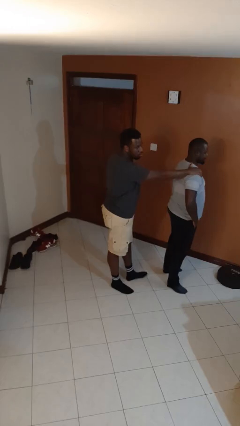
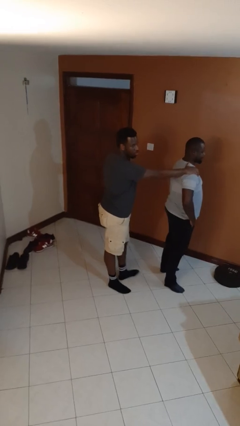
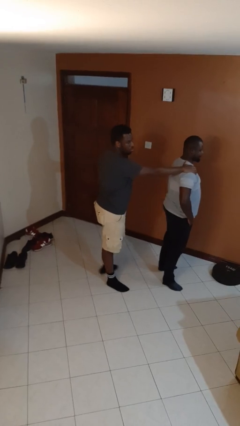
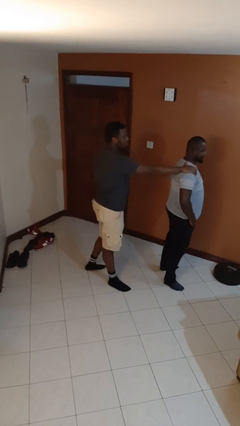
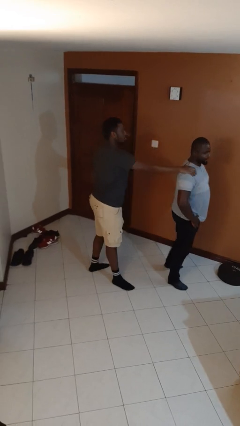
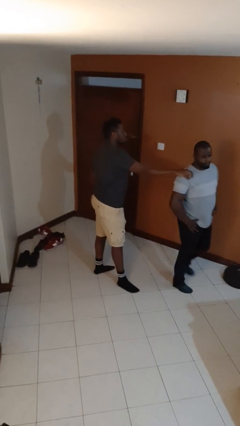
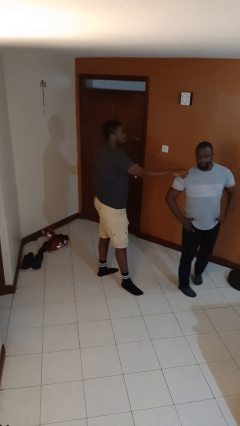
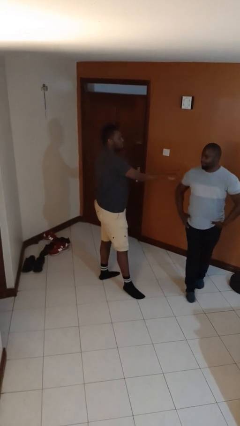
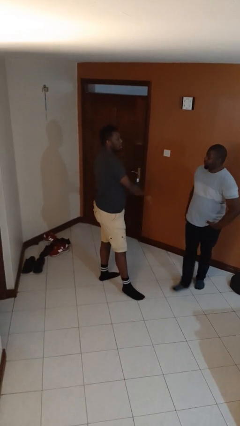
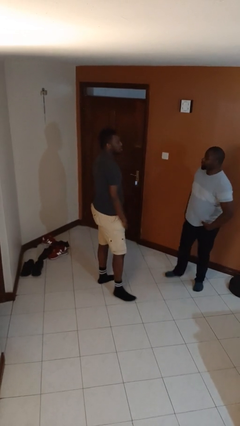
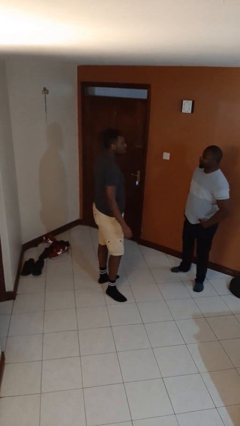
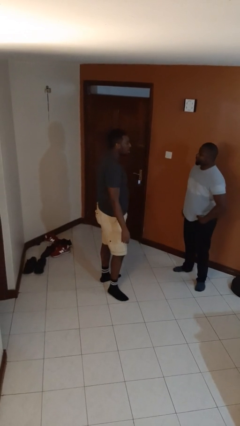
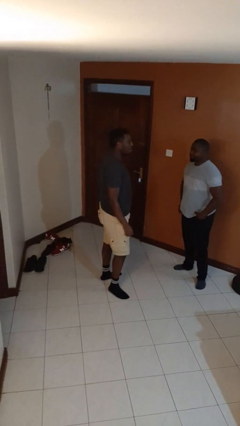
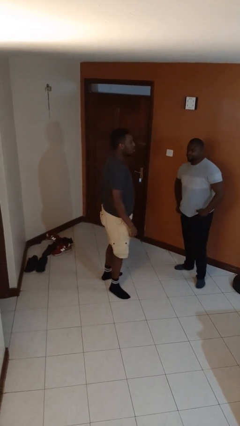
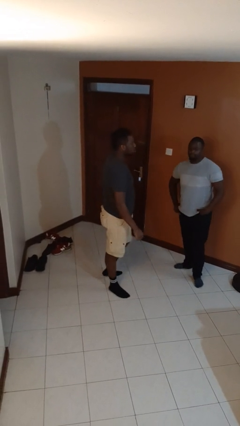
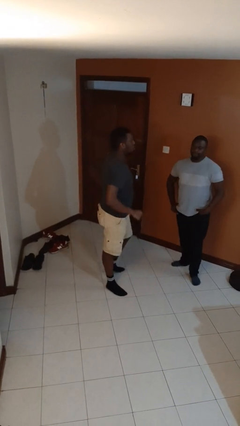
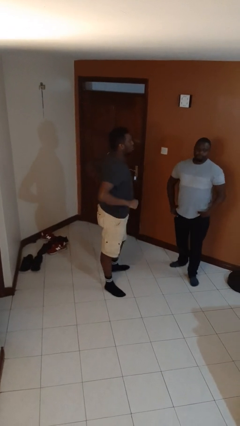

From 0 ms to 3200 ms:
person spins person around

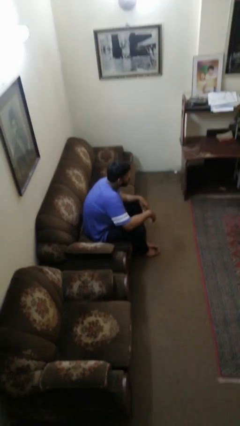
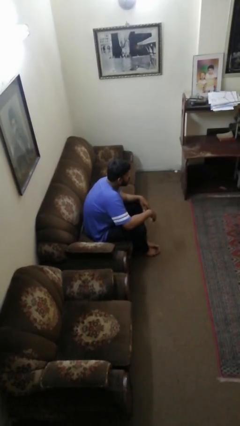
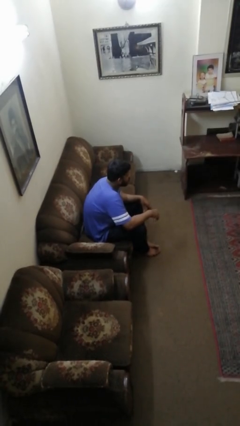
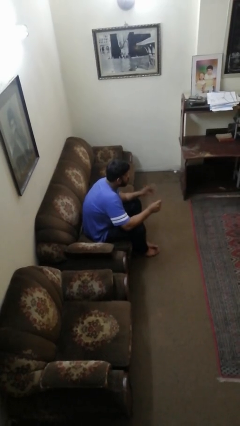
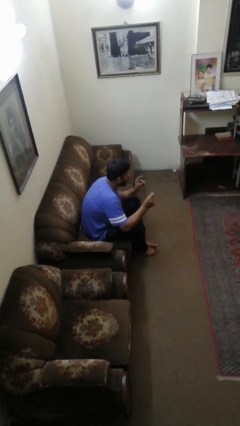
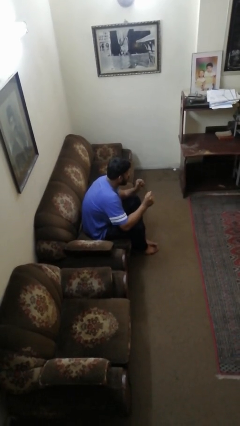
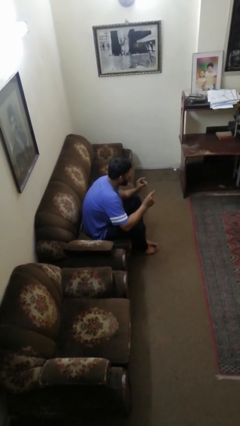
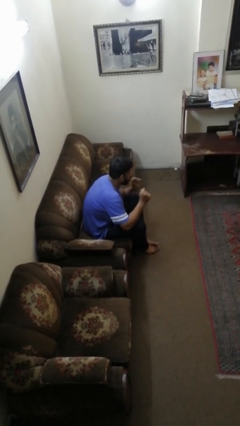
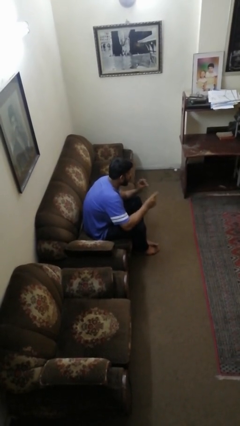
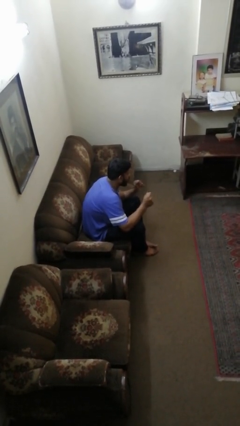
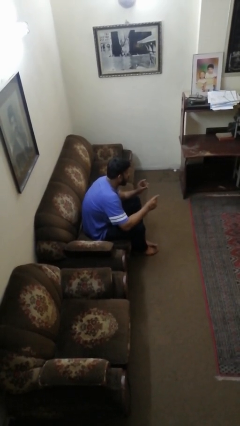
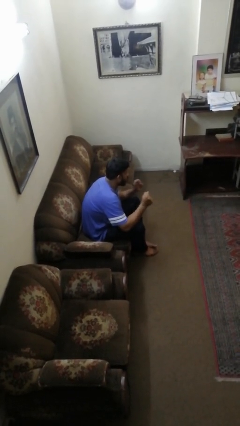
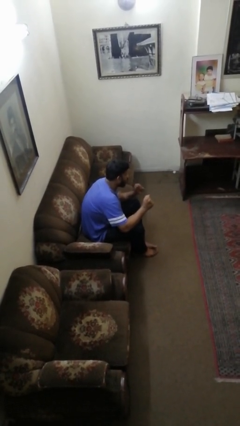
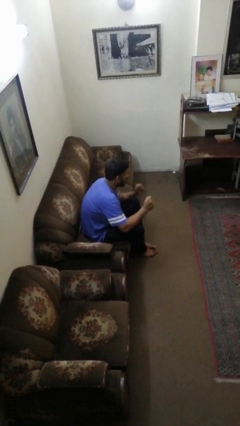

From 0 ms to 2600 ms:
person snaps fingers

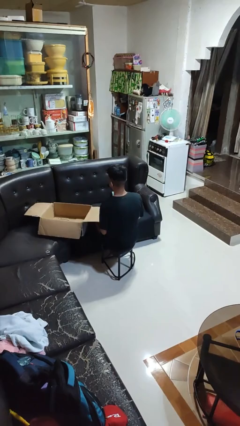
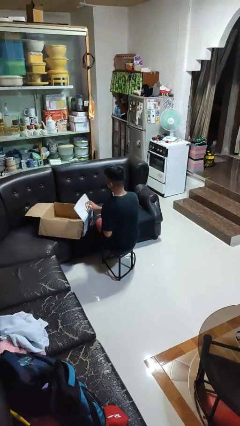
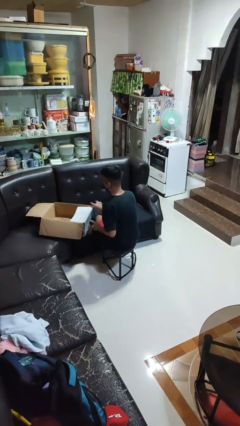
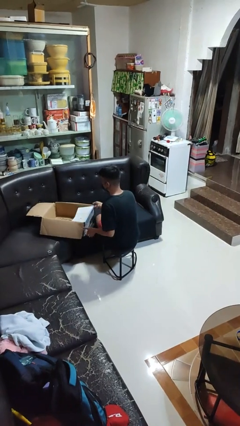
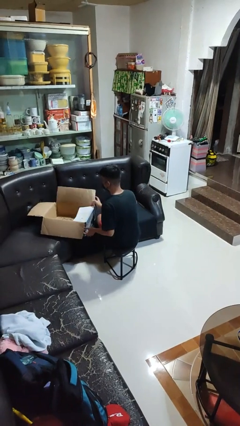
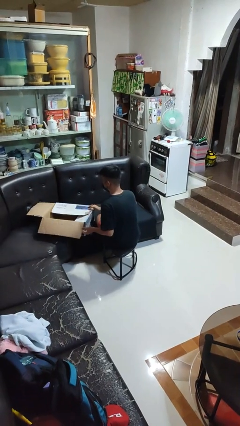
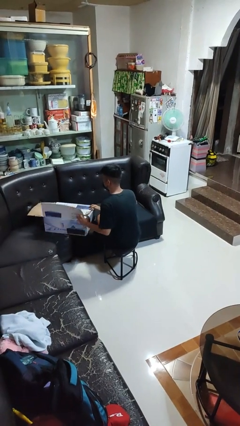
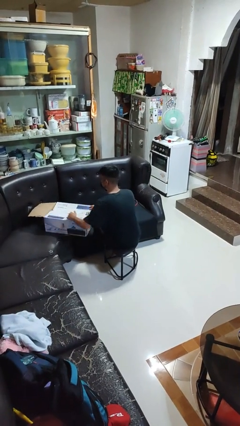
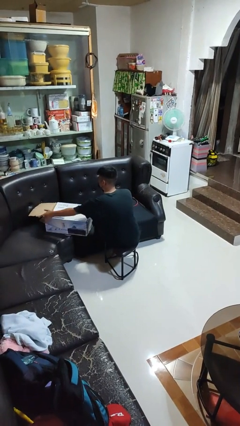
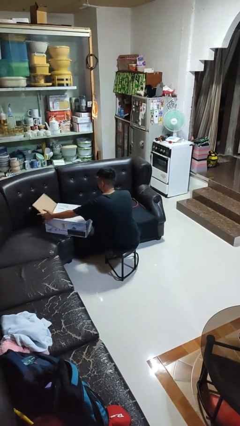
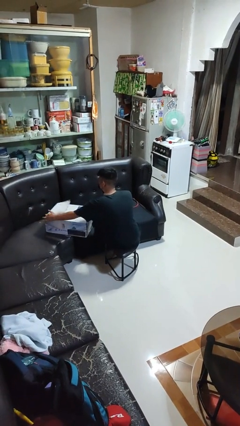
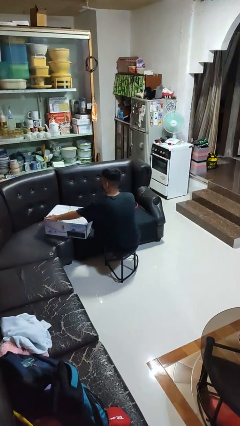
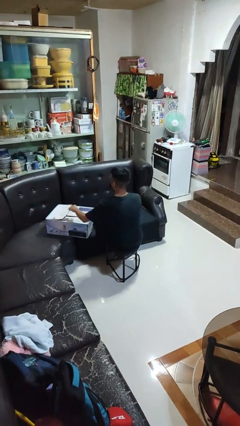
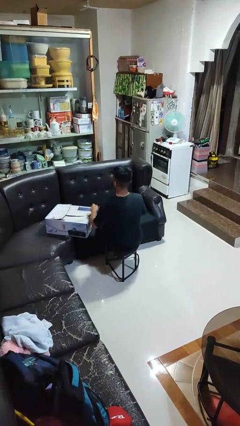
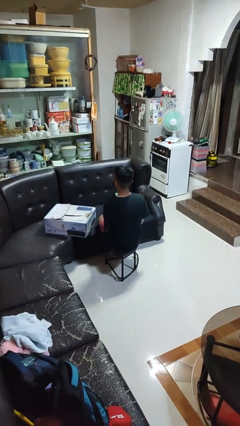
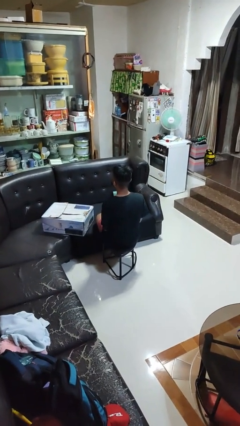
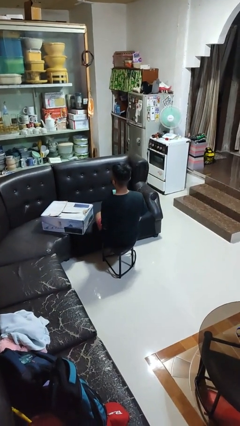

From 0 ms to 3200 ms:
person closes box

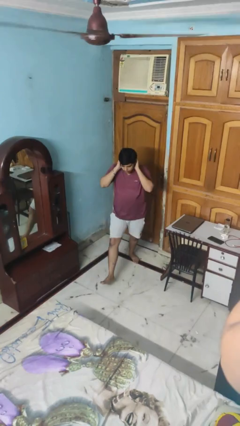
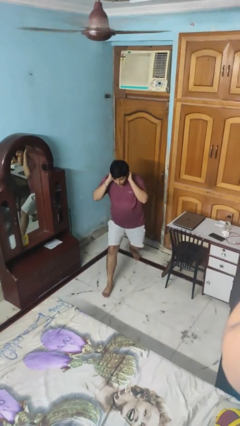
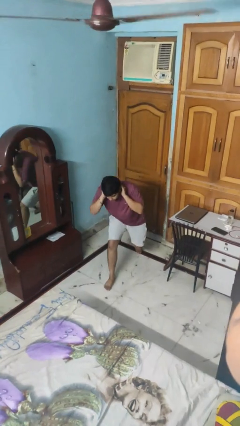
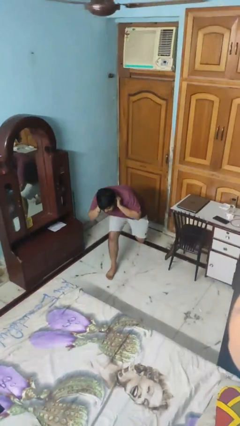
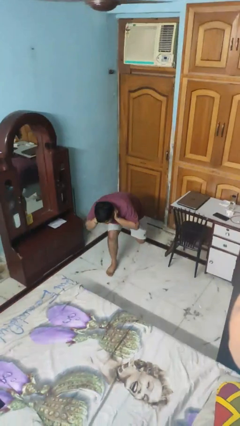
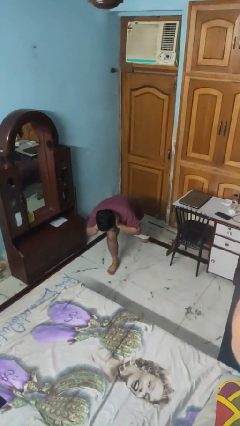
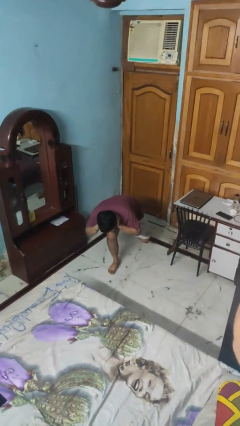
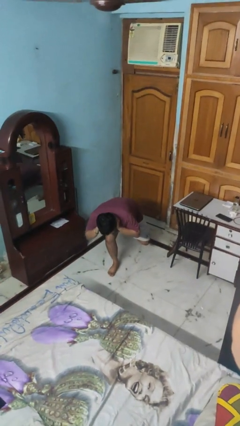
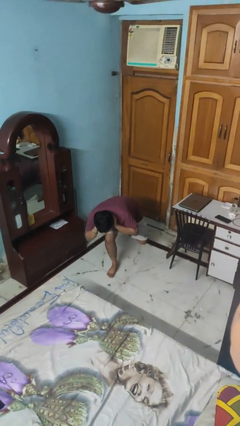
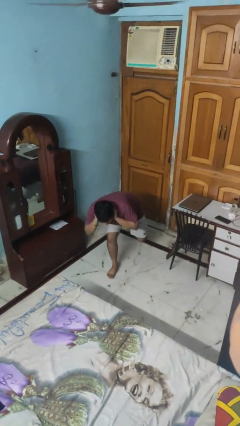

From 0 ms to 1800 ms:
person exercises with lunges

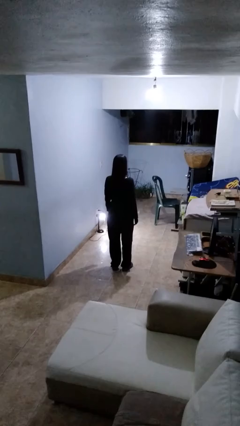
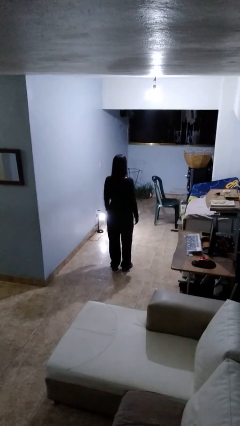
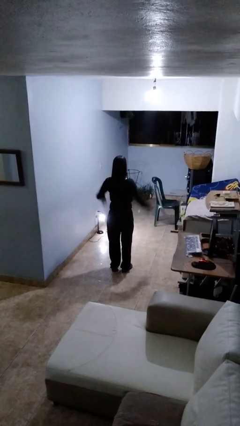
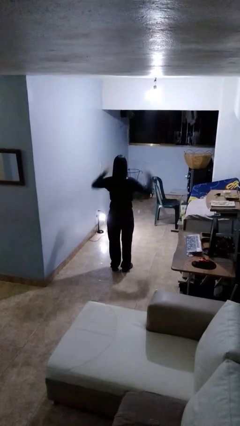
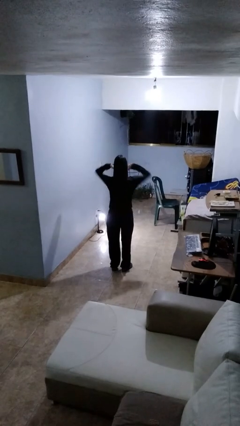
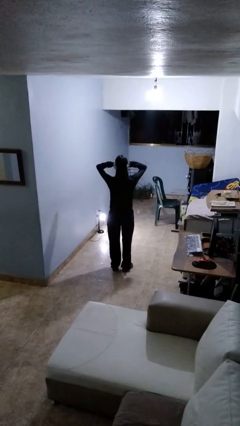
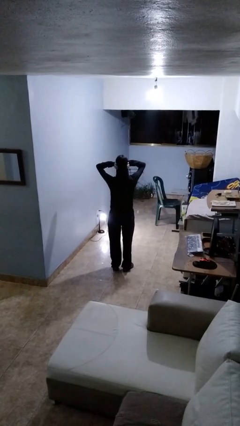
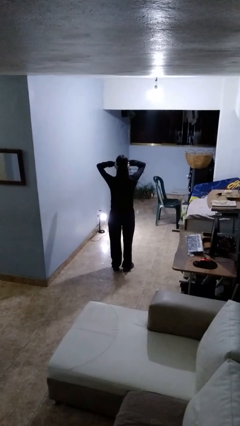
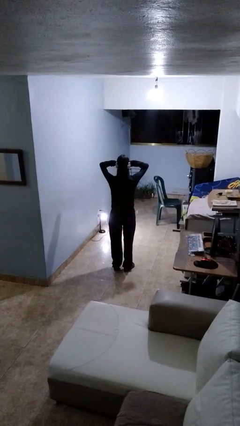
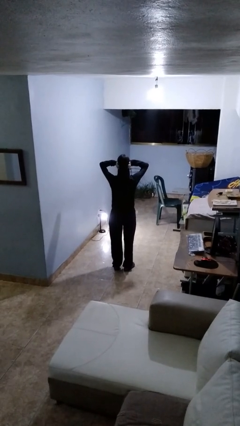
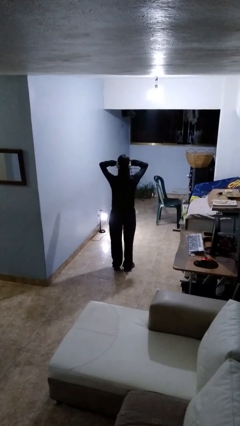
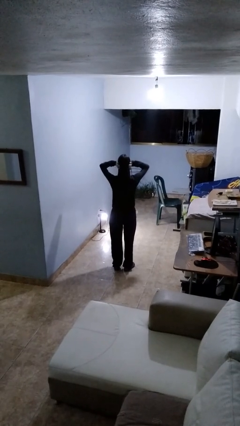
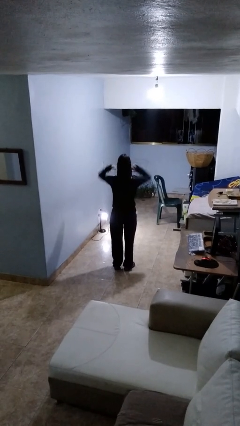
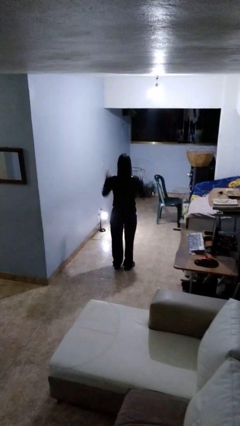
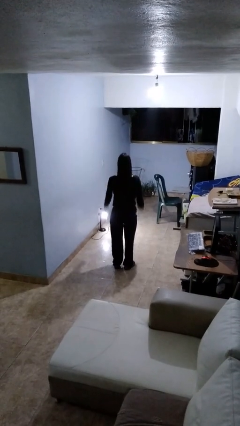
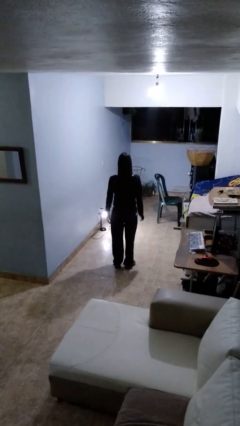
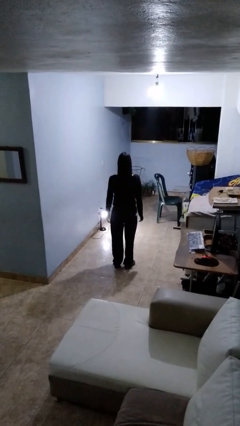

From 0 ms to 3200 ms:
person puts fingers in ear

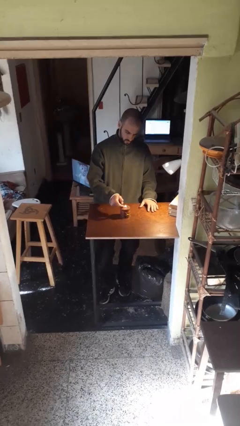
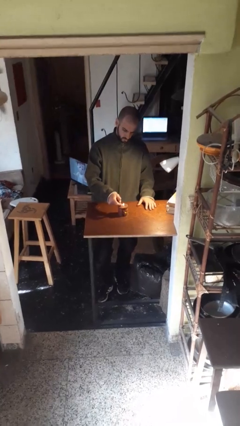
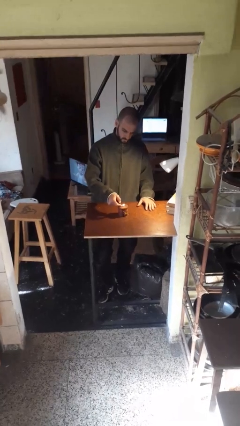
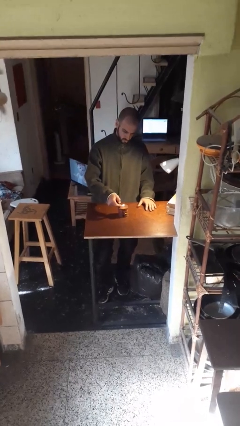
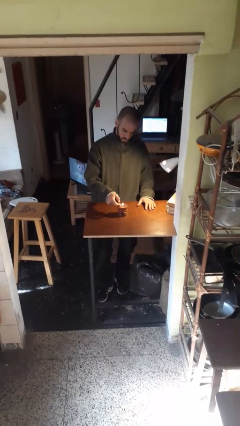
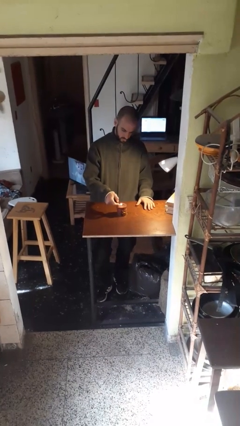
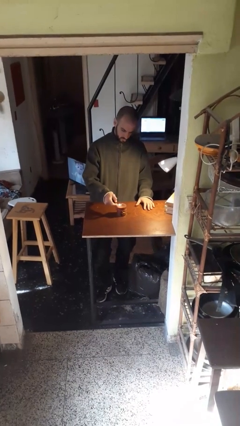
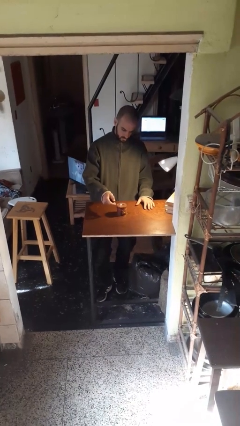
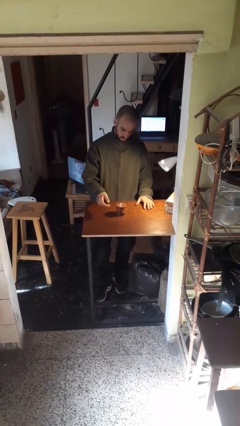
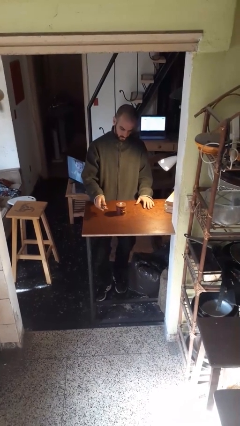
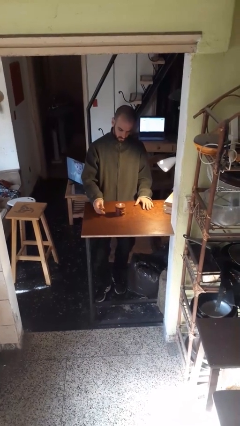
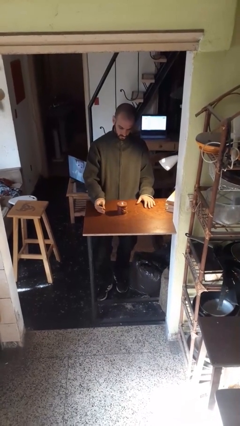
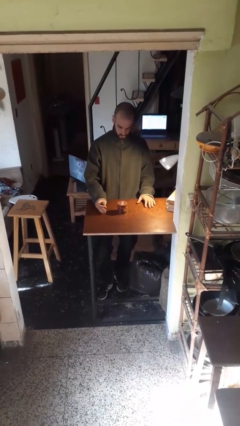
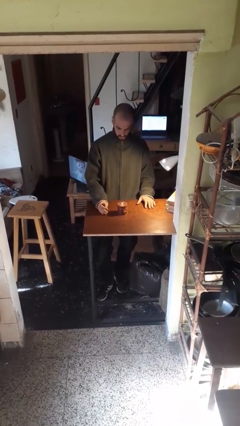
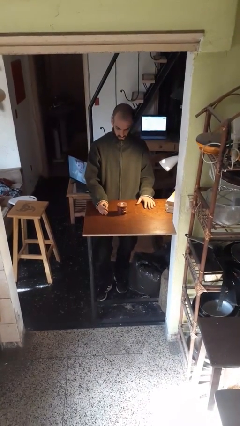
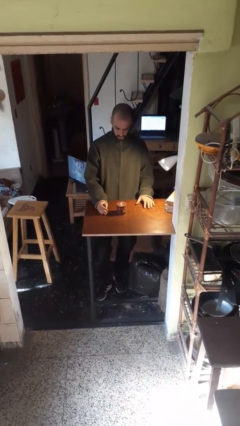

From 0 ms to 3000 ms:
person lights candle

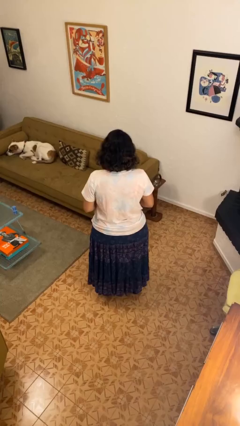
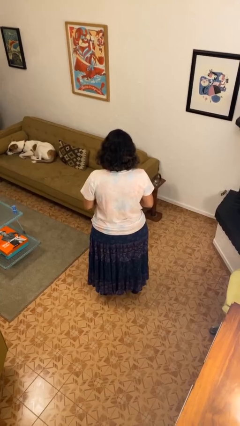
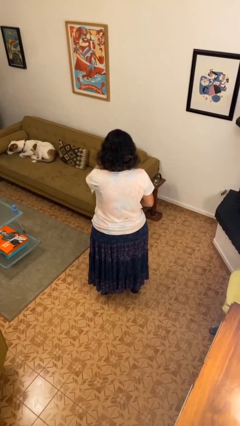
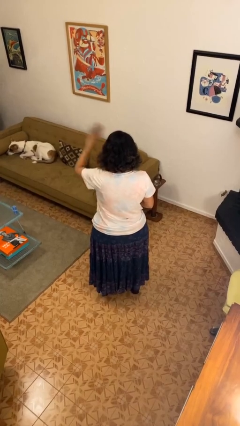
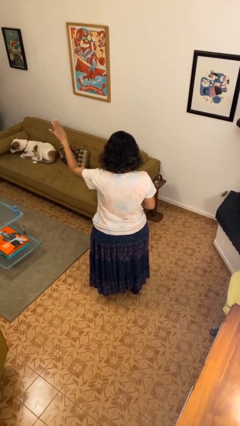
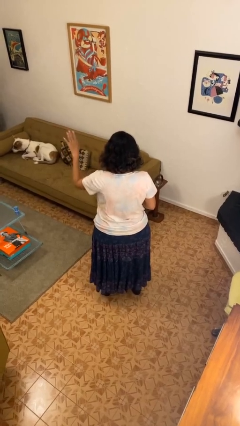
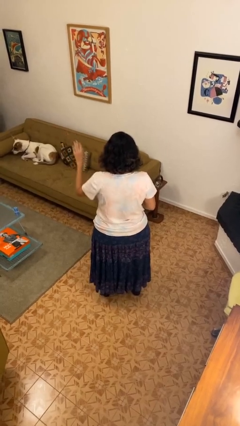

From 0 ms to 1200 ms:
person gestures swipe left
